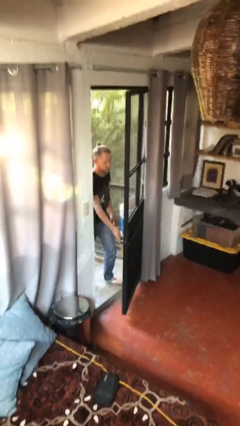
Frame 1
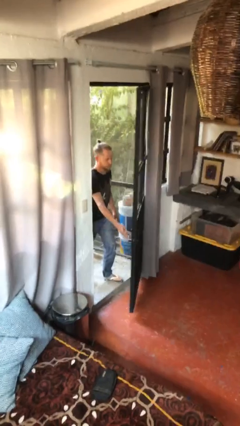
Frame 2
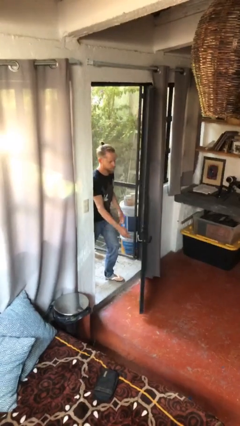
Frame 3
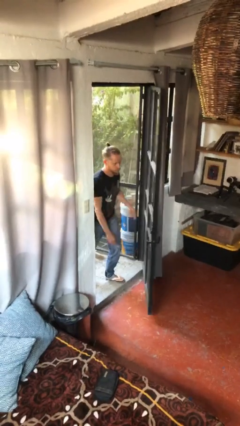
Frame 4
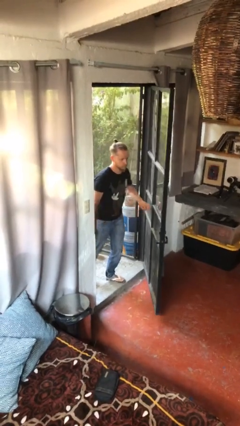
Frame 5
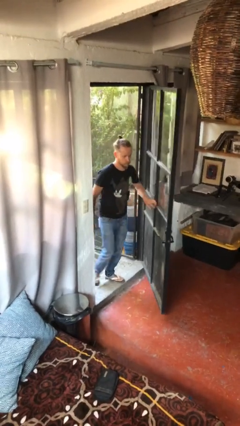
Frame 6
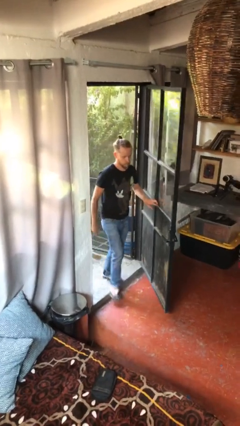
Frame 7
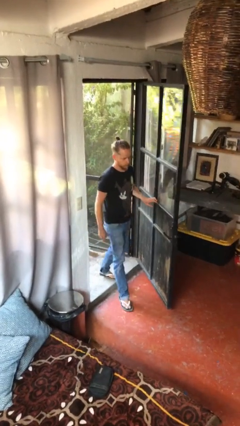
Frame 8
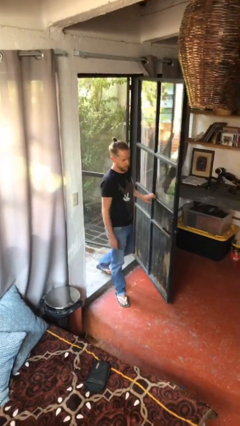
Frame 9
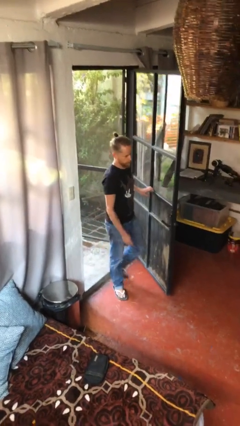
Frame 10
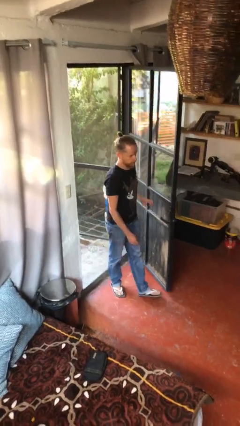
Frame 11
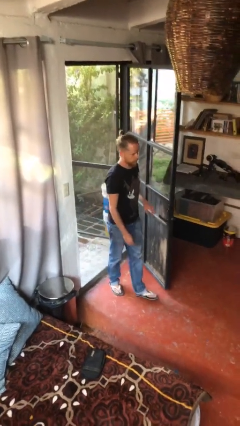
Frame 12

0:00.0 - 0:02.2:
person enters scene through structure

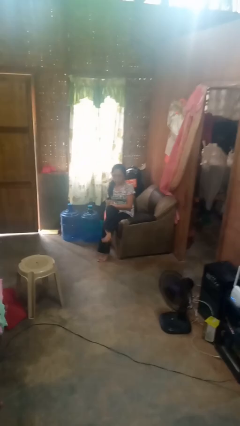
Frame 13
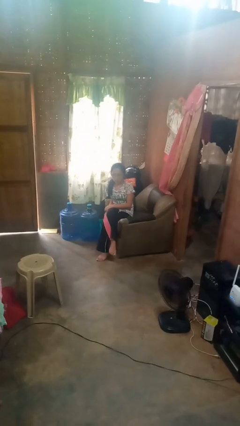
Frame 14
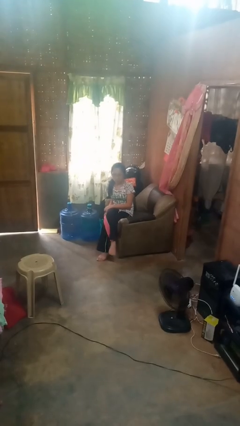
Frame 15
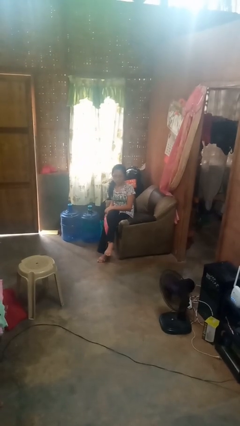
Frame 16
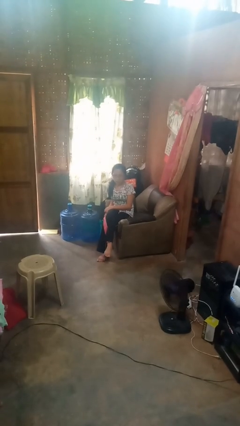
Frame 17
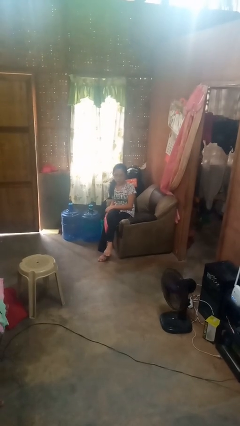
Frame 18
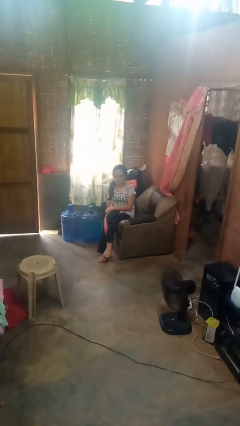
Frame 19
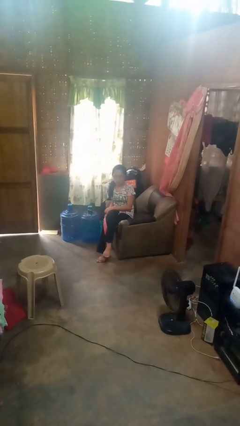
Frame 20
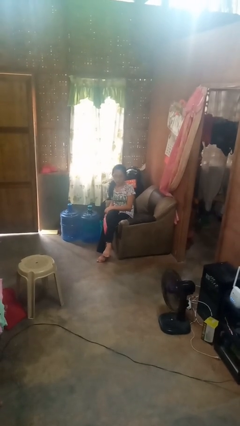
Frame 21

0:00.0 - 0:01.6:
person crosses legs

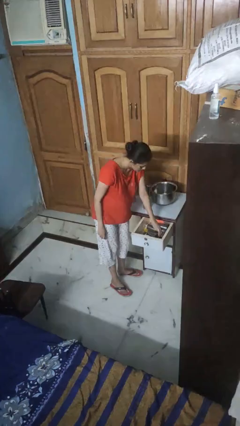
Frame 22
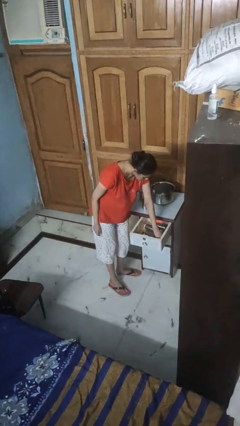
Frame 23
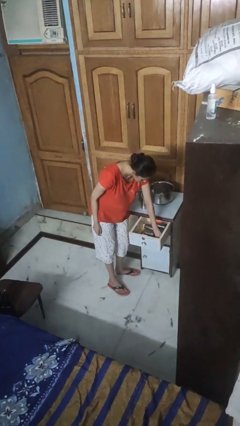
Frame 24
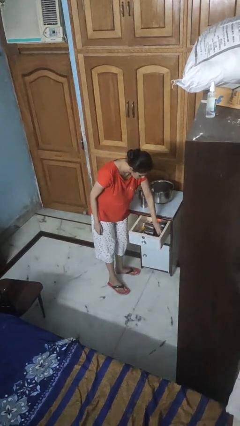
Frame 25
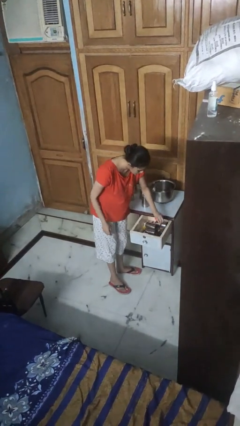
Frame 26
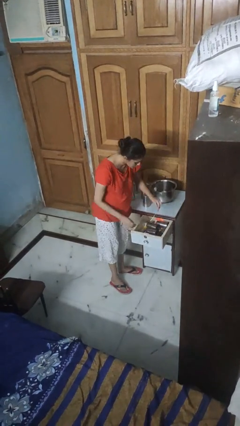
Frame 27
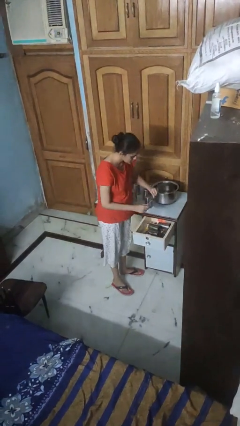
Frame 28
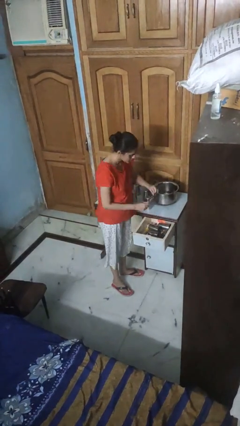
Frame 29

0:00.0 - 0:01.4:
person takes object from kitchen drawer

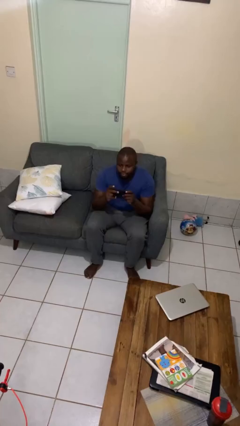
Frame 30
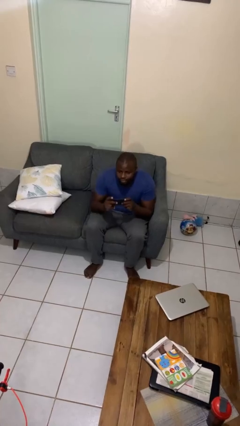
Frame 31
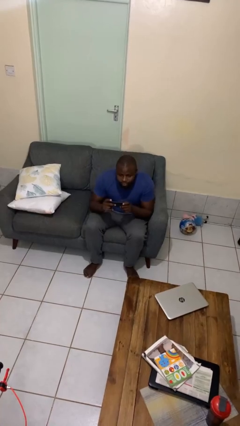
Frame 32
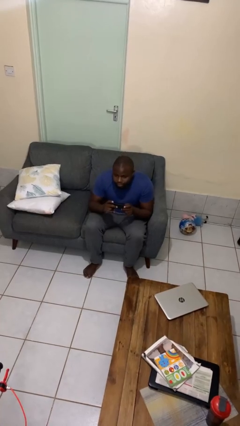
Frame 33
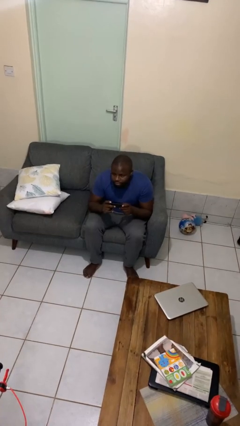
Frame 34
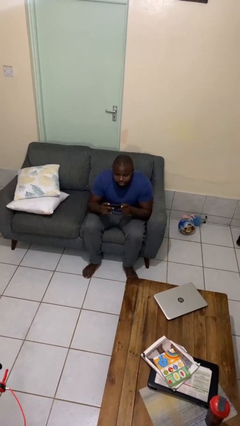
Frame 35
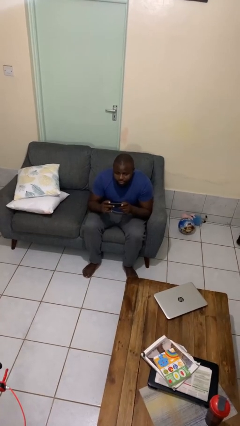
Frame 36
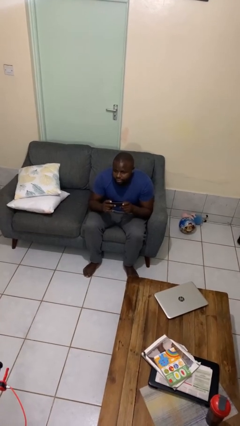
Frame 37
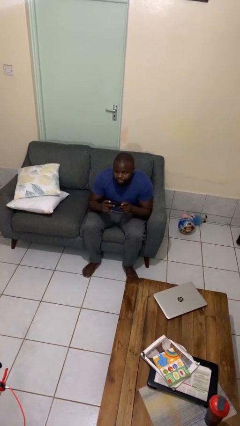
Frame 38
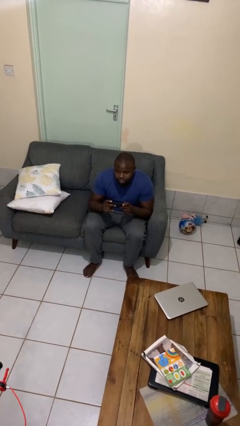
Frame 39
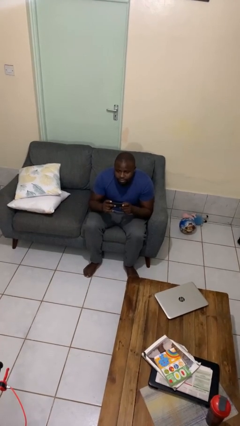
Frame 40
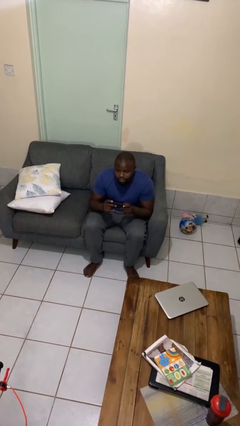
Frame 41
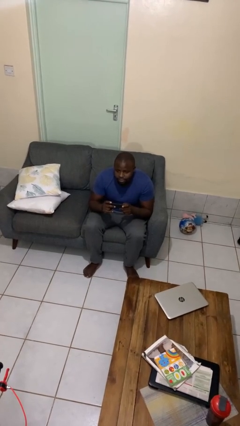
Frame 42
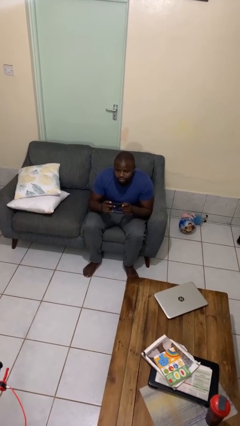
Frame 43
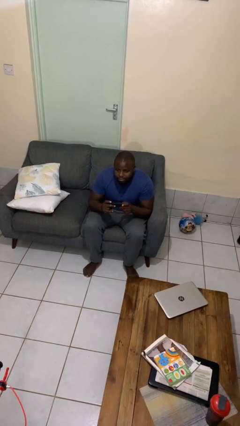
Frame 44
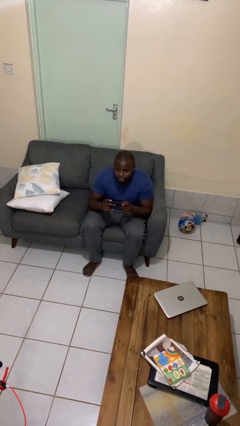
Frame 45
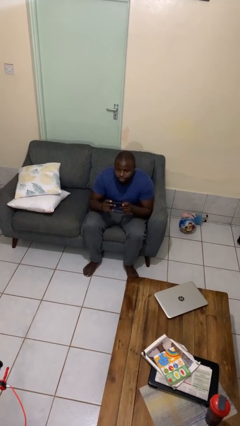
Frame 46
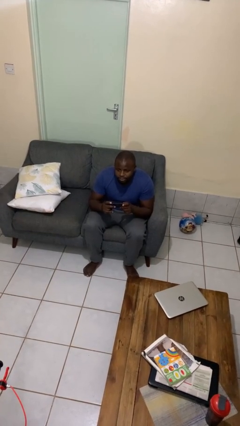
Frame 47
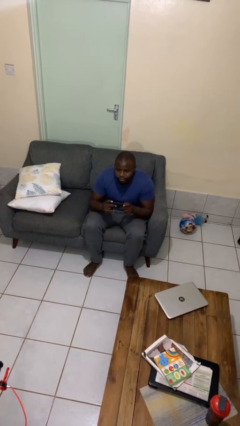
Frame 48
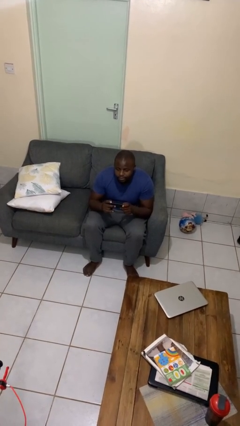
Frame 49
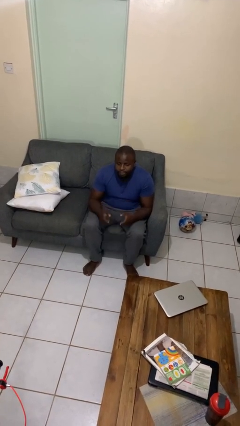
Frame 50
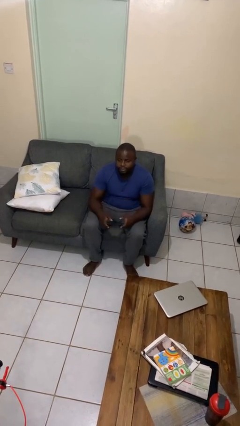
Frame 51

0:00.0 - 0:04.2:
person interacts with handheld game

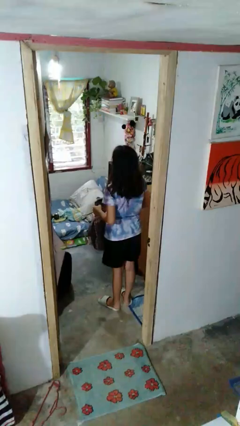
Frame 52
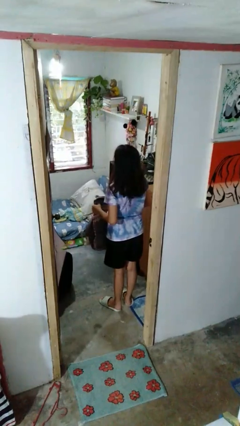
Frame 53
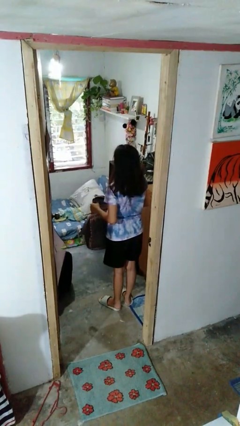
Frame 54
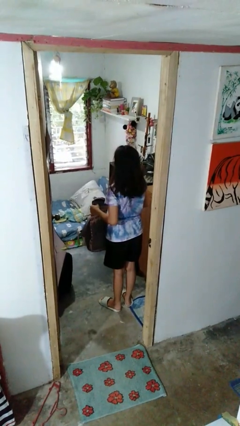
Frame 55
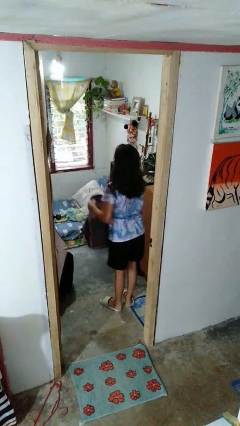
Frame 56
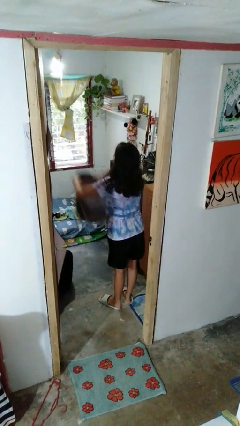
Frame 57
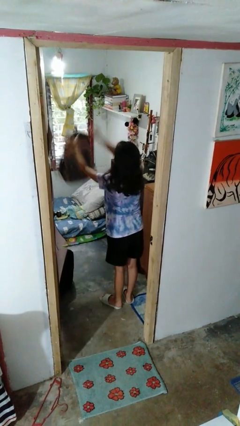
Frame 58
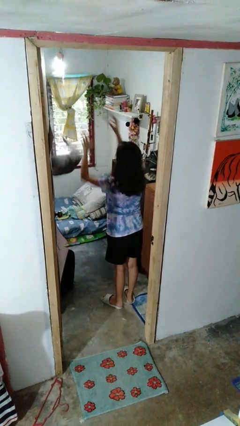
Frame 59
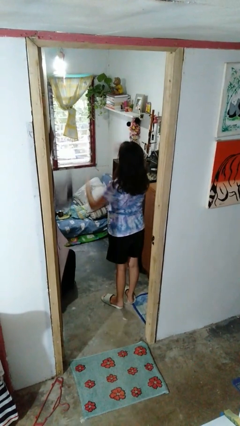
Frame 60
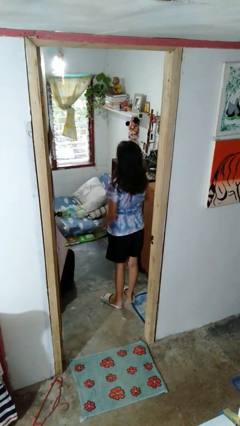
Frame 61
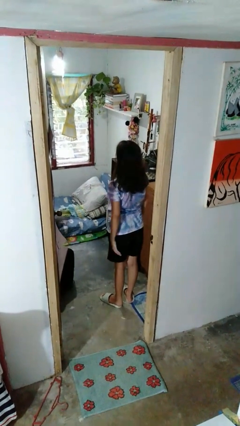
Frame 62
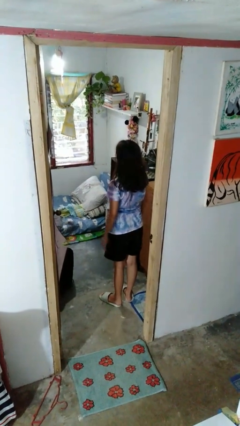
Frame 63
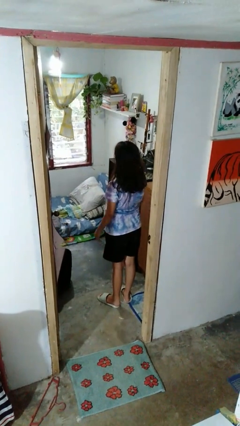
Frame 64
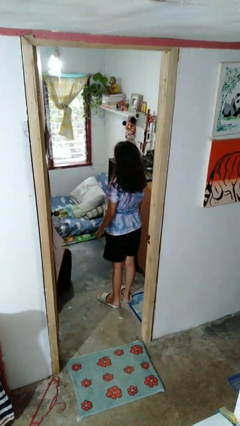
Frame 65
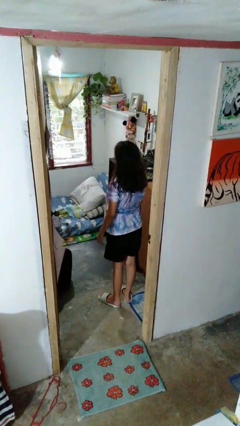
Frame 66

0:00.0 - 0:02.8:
person throws object on bed

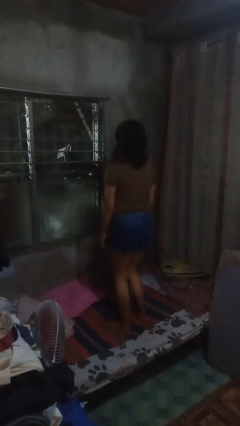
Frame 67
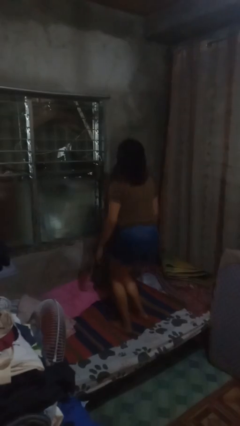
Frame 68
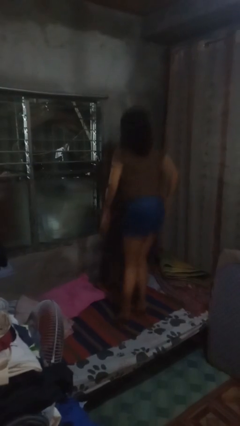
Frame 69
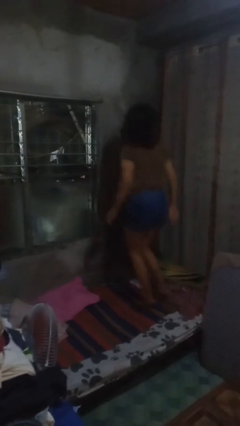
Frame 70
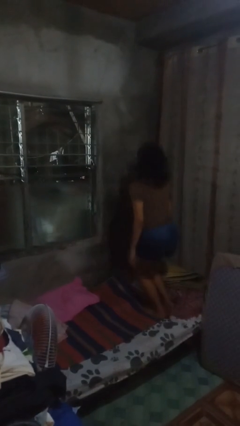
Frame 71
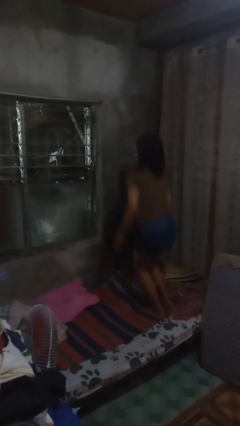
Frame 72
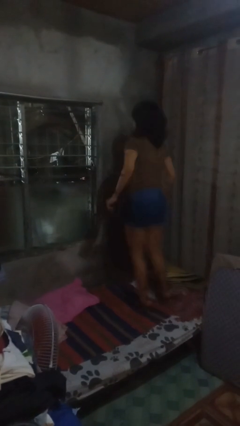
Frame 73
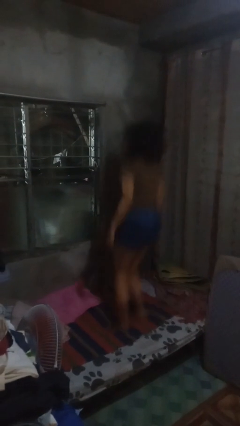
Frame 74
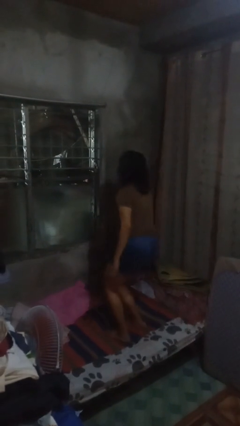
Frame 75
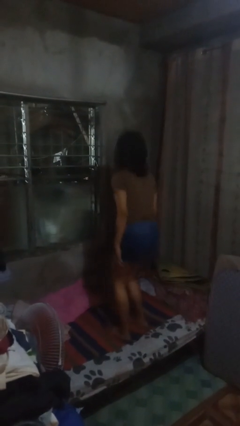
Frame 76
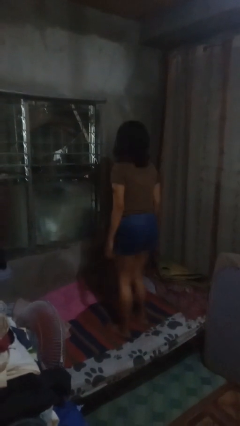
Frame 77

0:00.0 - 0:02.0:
person jumps on bed

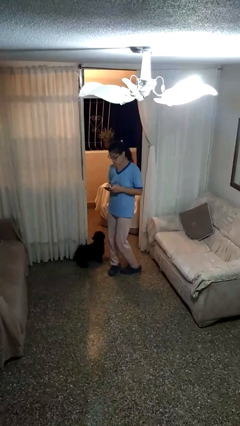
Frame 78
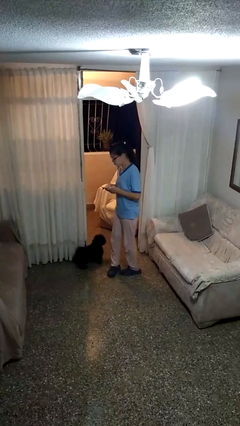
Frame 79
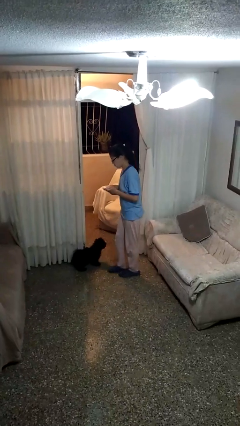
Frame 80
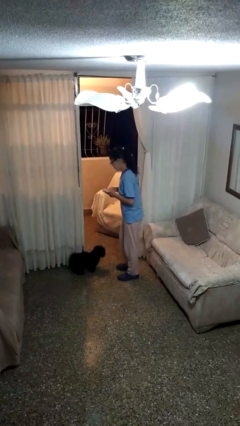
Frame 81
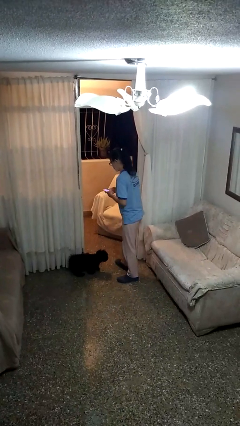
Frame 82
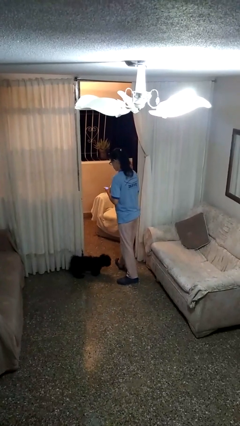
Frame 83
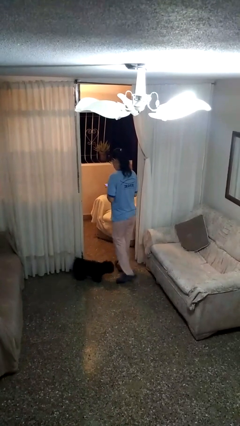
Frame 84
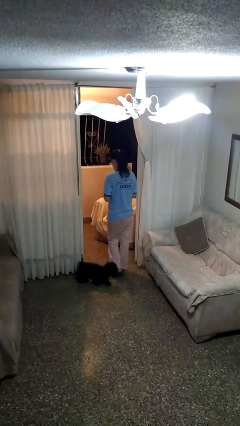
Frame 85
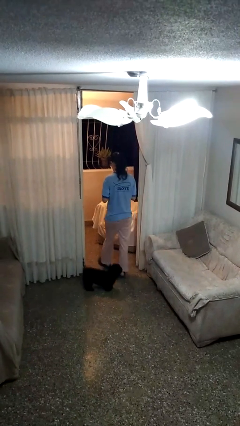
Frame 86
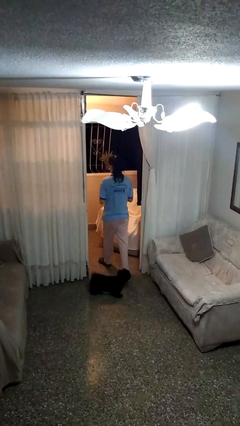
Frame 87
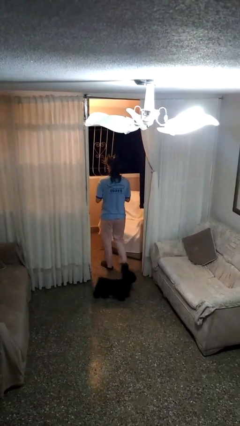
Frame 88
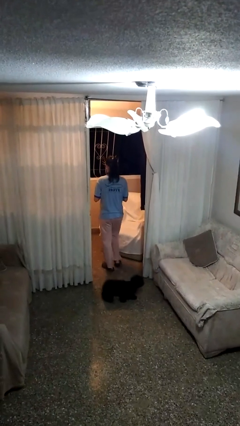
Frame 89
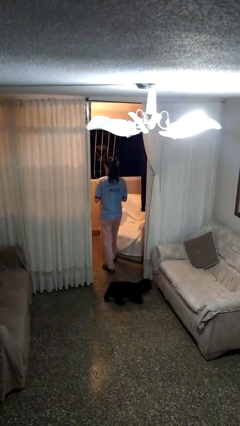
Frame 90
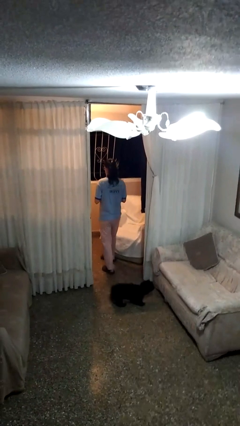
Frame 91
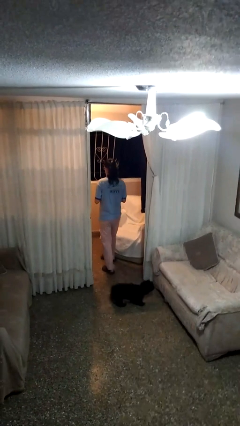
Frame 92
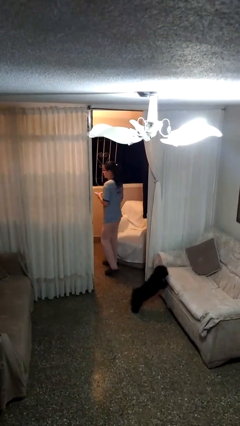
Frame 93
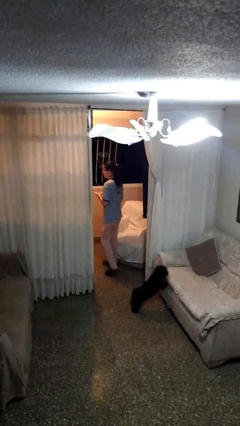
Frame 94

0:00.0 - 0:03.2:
person exits scene through structure
